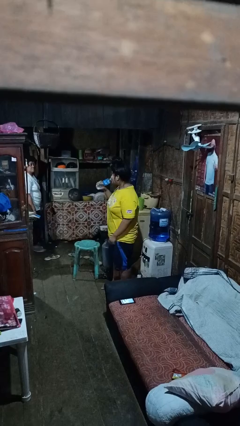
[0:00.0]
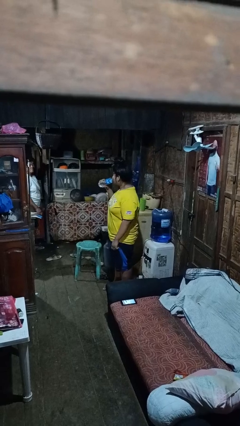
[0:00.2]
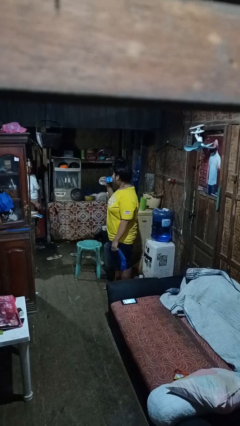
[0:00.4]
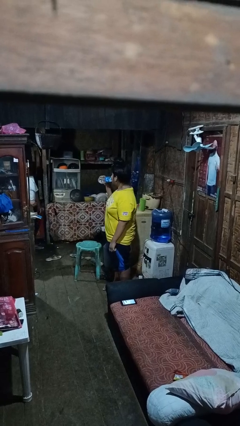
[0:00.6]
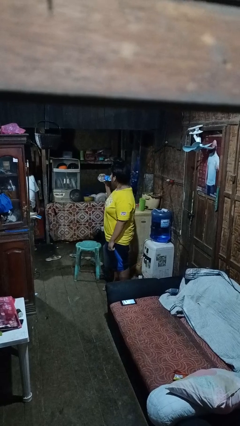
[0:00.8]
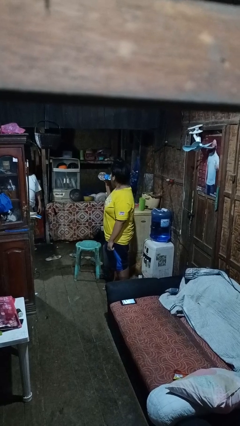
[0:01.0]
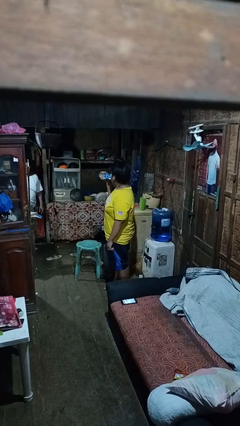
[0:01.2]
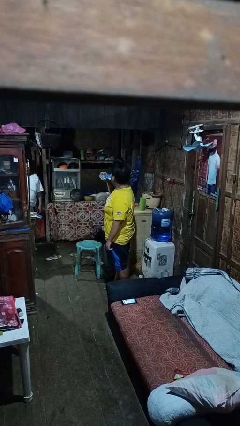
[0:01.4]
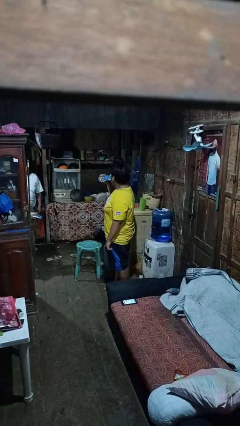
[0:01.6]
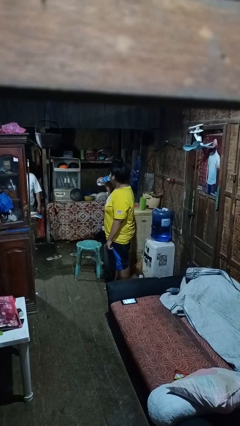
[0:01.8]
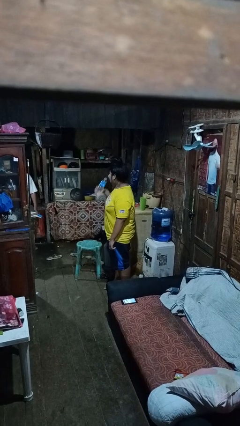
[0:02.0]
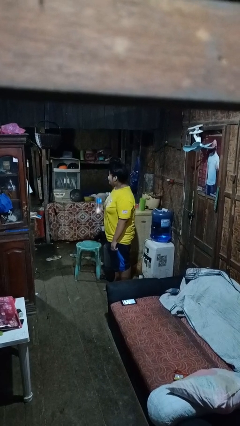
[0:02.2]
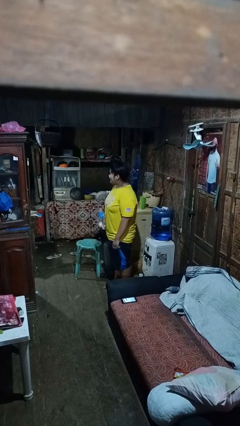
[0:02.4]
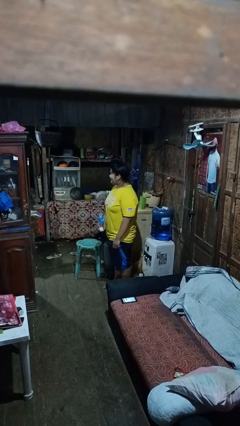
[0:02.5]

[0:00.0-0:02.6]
person drinks from bottle

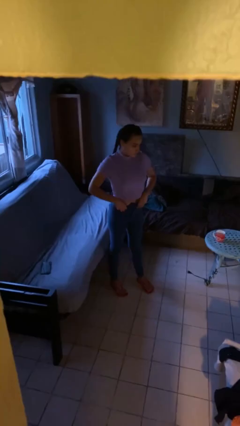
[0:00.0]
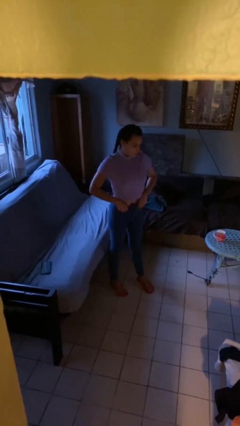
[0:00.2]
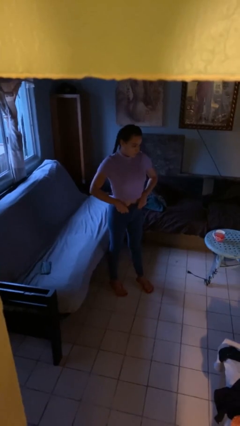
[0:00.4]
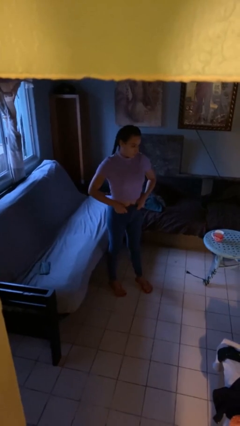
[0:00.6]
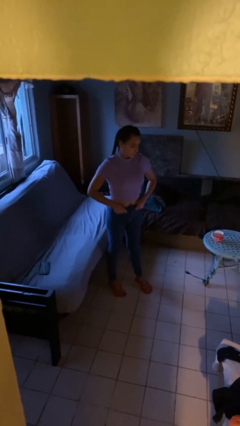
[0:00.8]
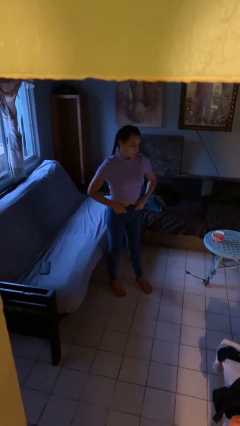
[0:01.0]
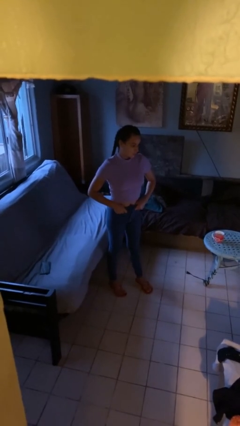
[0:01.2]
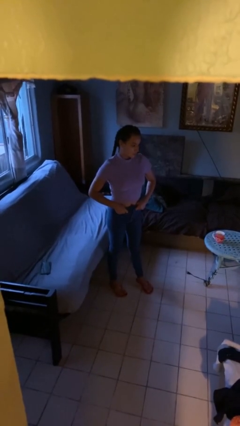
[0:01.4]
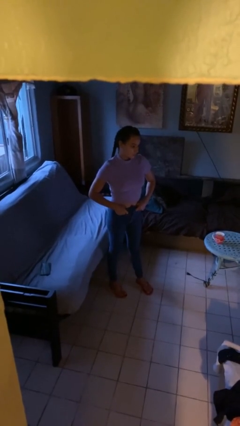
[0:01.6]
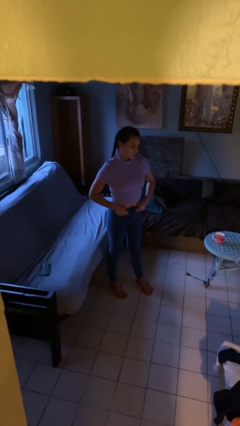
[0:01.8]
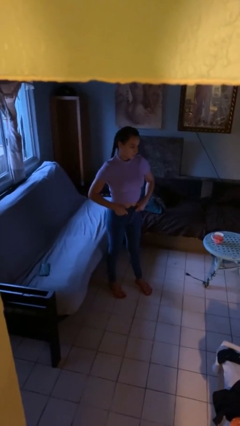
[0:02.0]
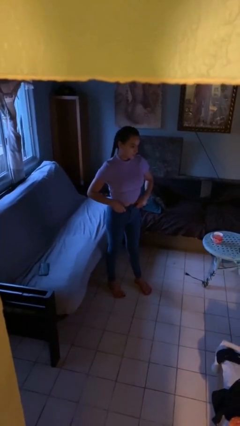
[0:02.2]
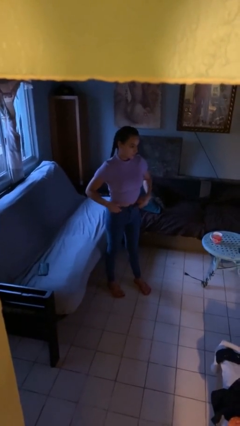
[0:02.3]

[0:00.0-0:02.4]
person puts hands in back pockets

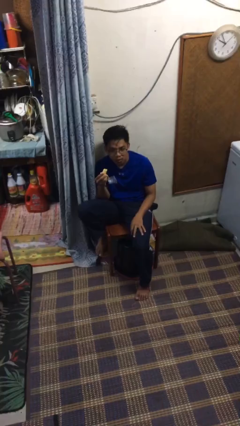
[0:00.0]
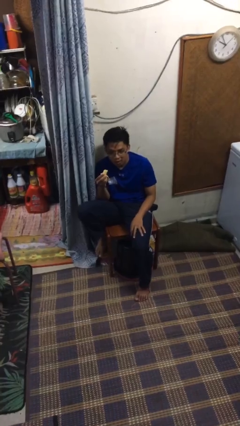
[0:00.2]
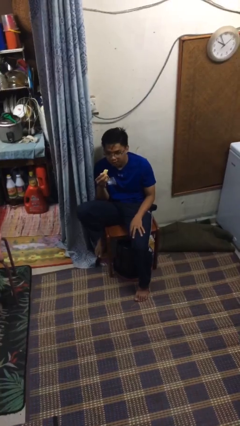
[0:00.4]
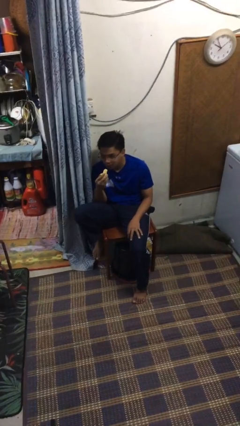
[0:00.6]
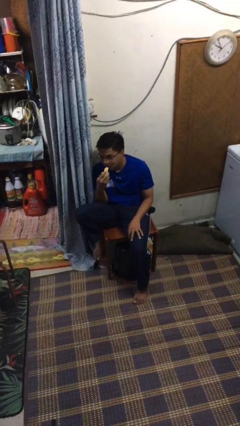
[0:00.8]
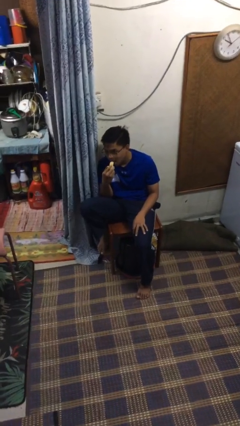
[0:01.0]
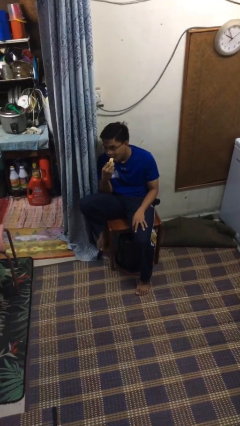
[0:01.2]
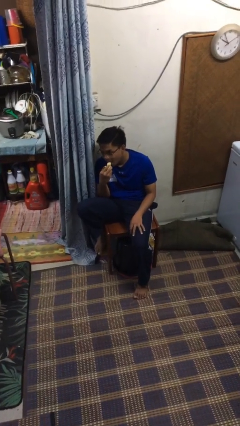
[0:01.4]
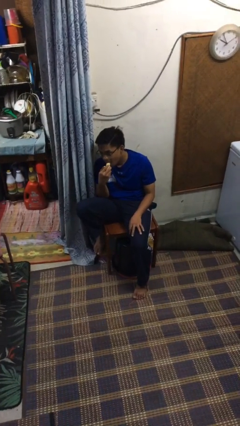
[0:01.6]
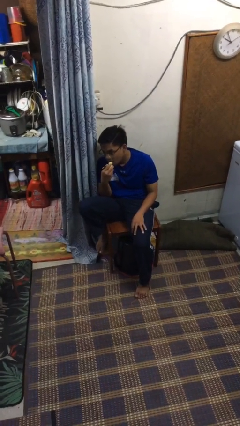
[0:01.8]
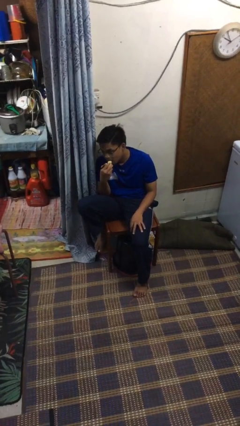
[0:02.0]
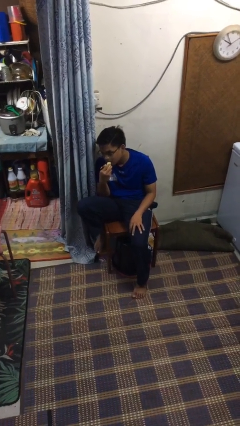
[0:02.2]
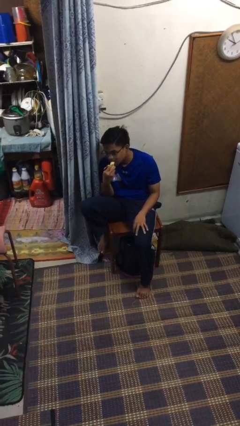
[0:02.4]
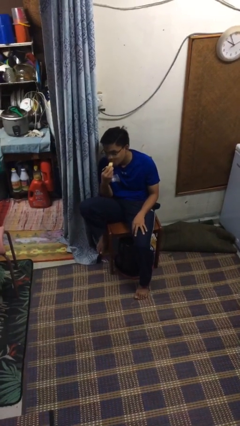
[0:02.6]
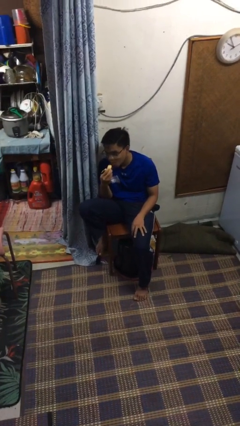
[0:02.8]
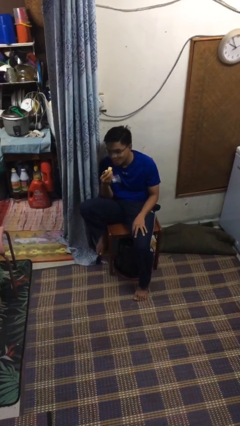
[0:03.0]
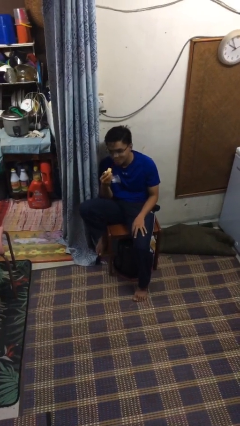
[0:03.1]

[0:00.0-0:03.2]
person eats banana

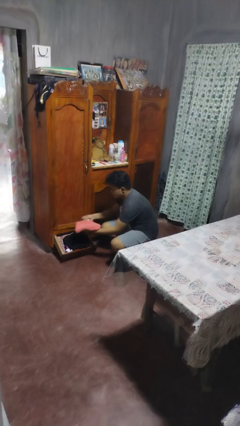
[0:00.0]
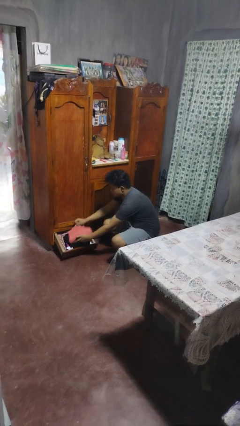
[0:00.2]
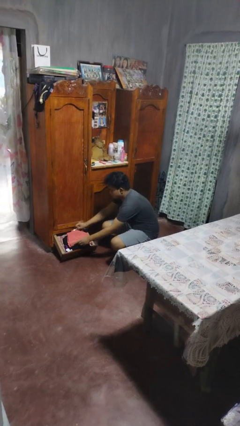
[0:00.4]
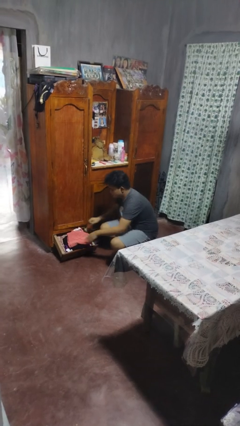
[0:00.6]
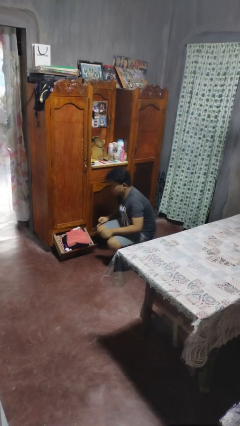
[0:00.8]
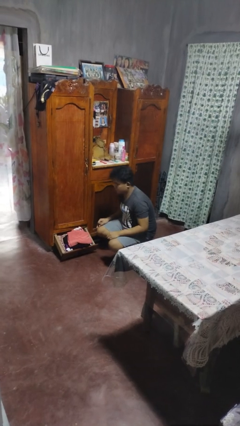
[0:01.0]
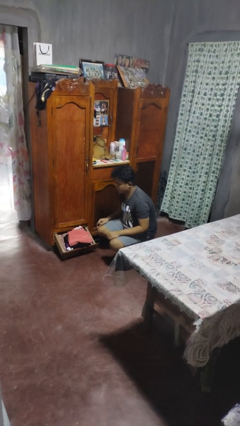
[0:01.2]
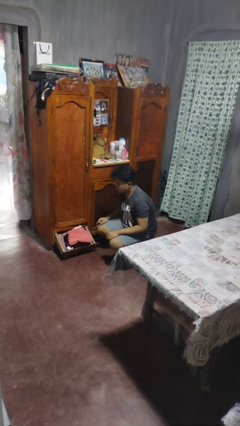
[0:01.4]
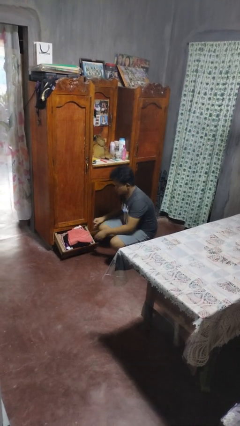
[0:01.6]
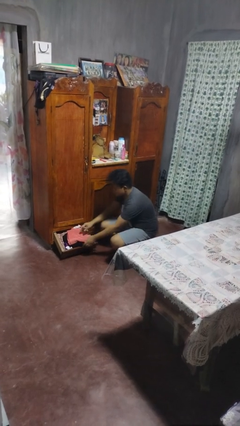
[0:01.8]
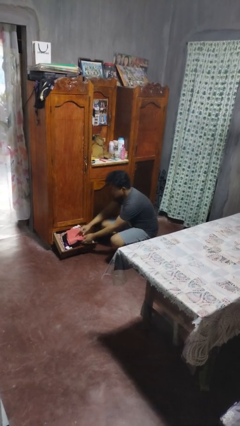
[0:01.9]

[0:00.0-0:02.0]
person puts clothes into dresser

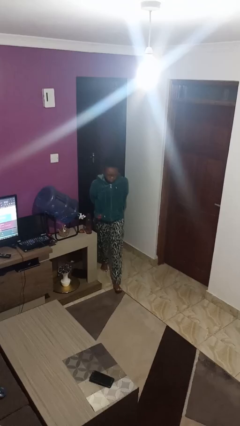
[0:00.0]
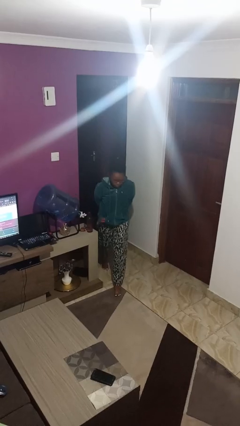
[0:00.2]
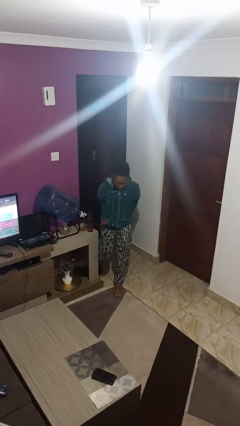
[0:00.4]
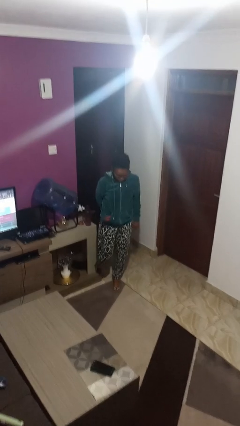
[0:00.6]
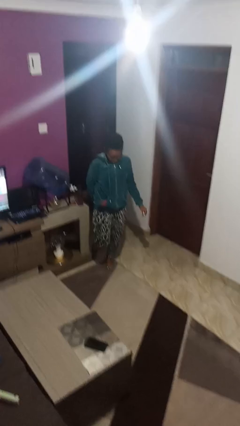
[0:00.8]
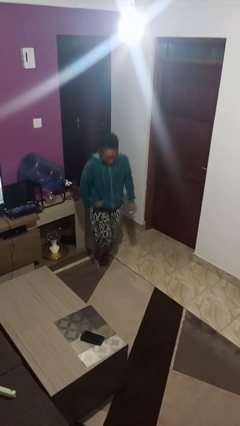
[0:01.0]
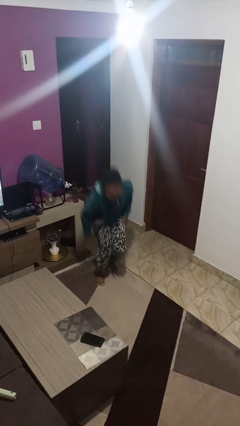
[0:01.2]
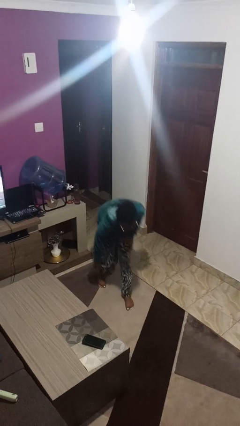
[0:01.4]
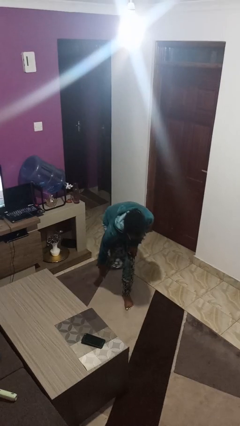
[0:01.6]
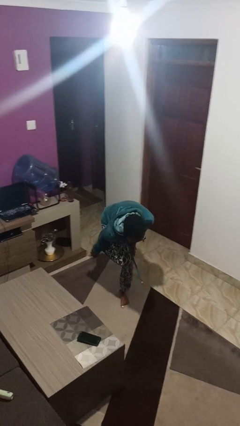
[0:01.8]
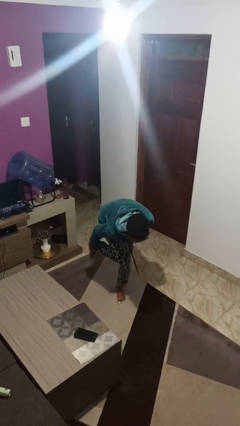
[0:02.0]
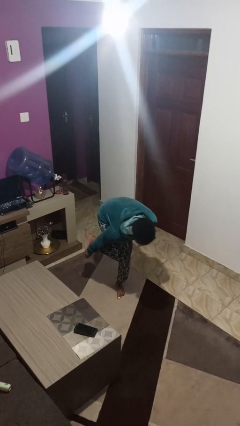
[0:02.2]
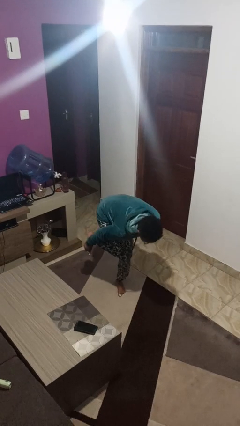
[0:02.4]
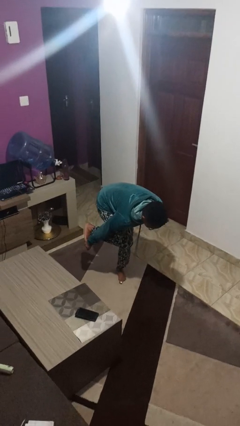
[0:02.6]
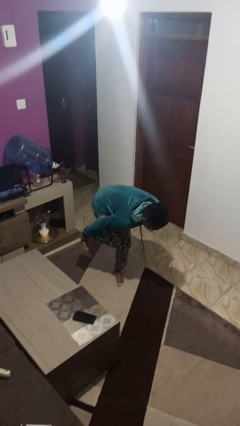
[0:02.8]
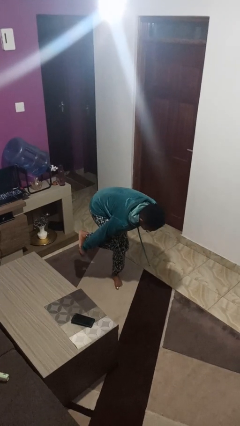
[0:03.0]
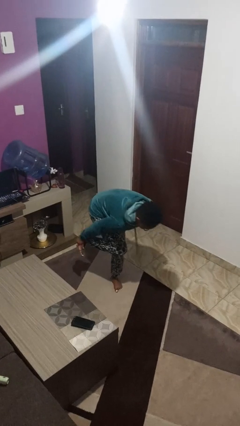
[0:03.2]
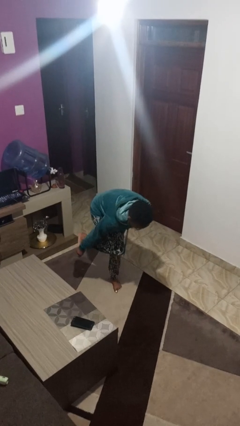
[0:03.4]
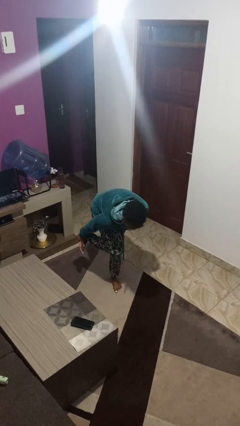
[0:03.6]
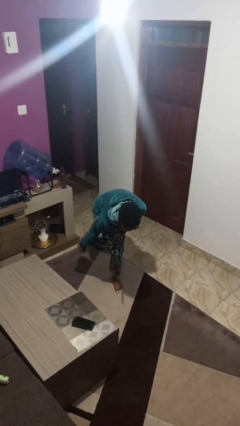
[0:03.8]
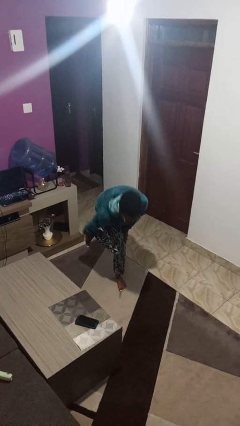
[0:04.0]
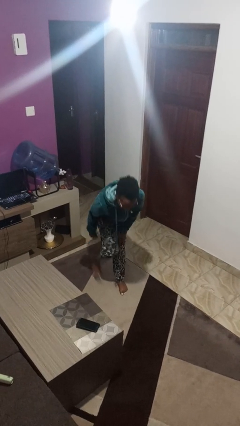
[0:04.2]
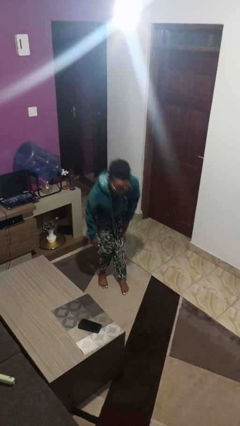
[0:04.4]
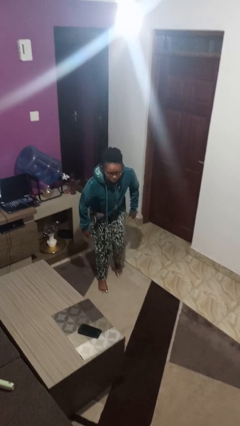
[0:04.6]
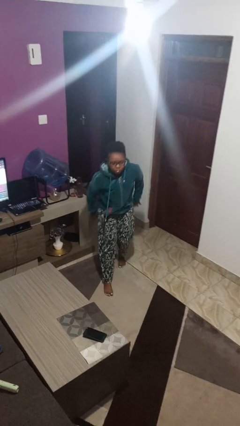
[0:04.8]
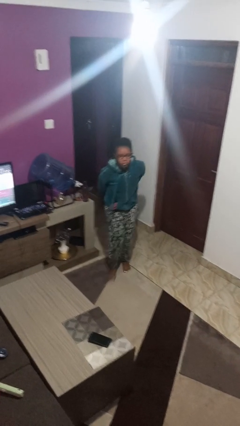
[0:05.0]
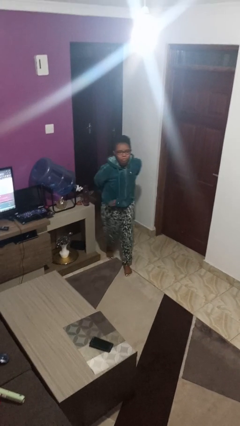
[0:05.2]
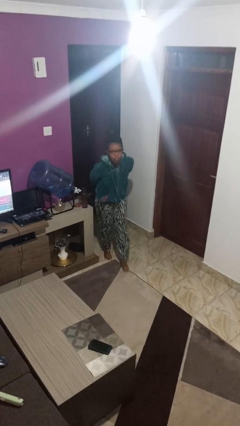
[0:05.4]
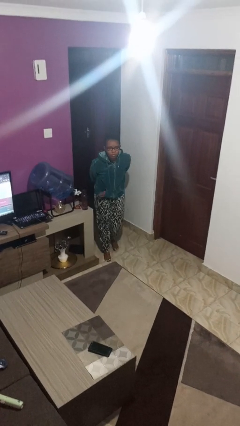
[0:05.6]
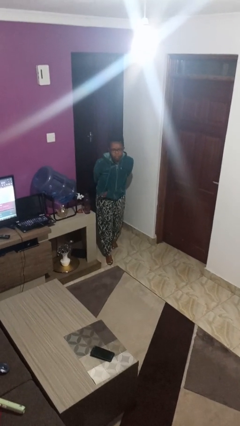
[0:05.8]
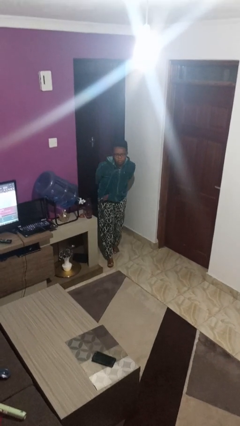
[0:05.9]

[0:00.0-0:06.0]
person stubs toe

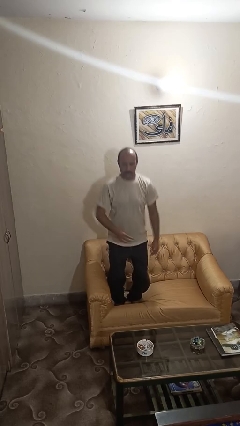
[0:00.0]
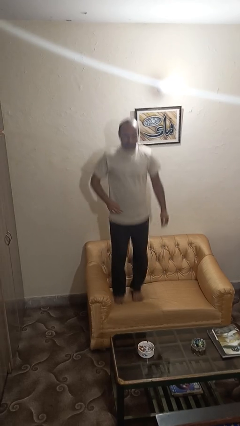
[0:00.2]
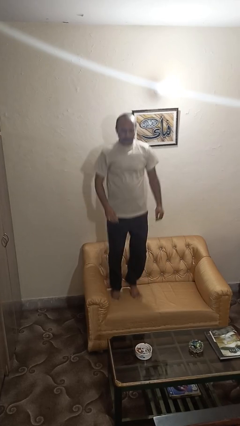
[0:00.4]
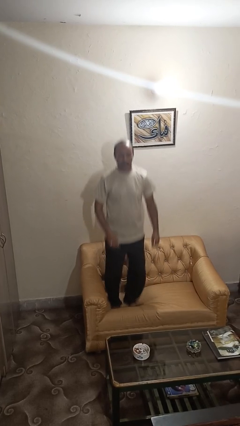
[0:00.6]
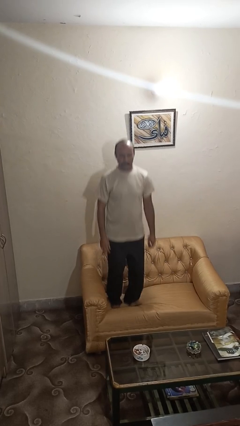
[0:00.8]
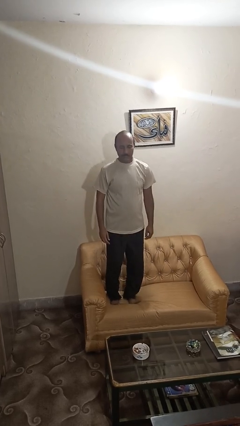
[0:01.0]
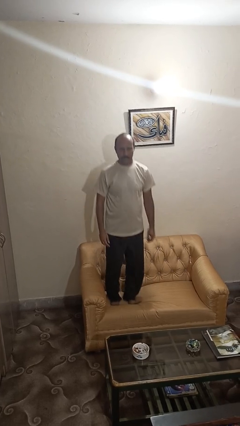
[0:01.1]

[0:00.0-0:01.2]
person jumps on couch

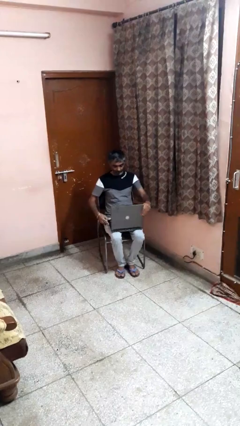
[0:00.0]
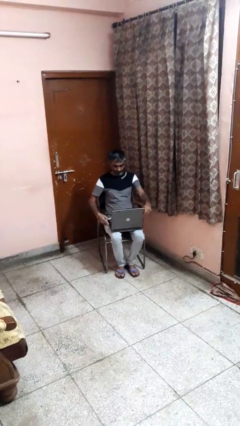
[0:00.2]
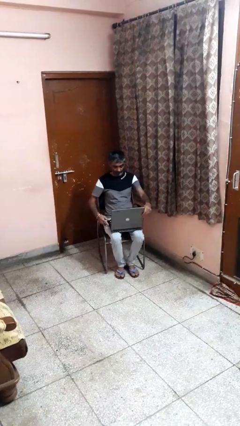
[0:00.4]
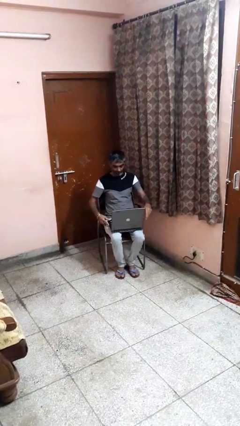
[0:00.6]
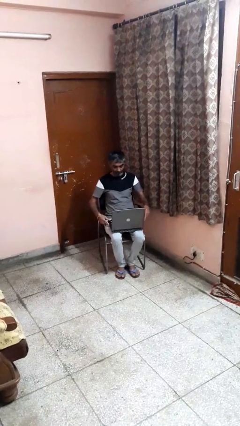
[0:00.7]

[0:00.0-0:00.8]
person opens laptop
